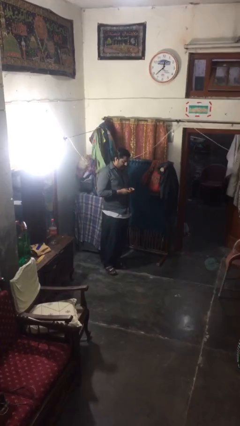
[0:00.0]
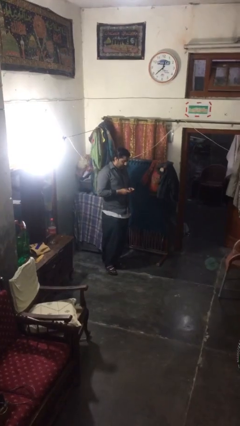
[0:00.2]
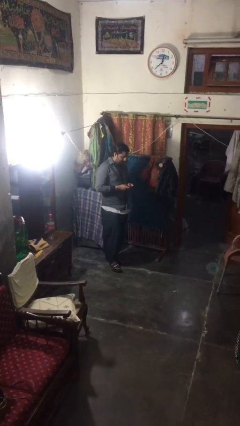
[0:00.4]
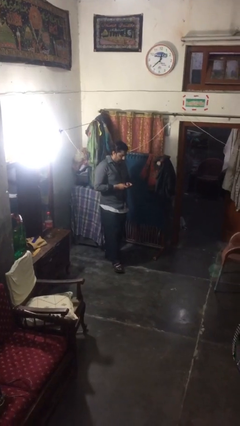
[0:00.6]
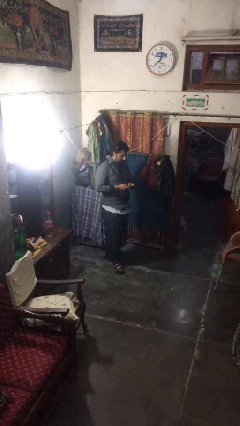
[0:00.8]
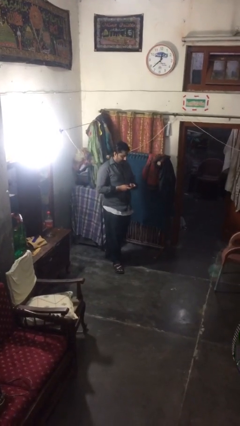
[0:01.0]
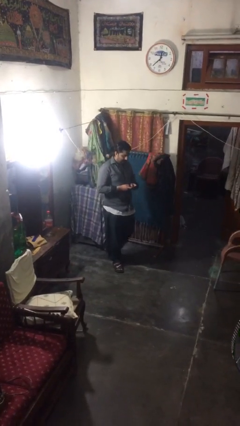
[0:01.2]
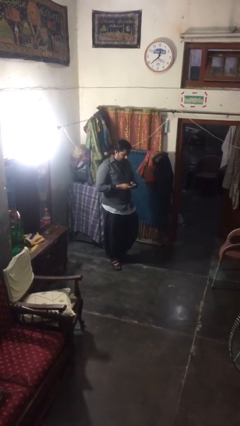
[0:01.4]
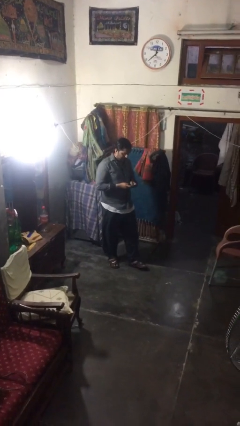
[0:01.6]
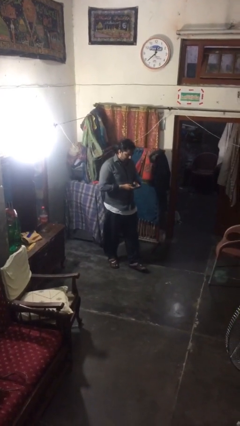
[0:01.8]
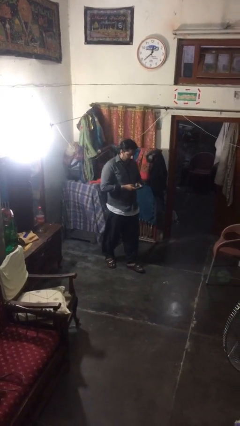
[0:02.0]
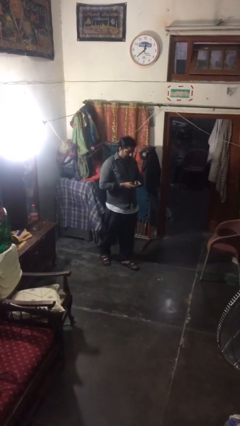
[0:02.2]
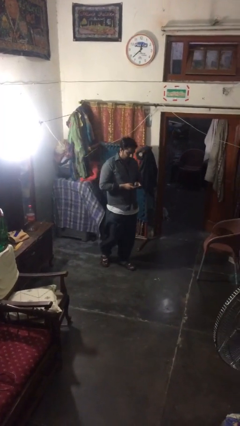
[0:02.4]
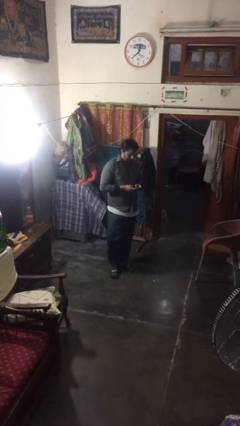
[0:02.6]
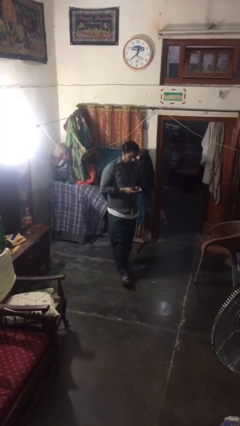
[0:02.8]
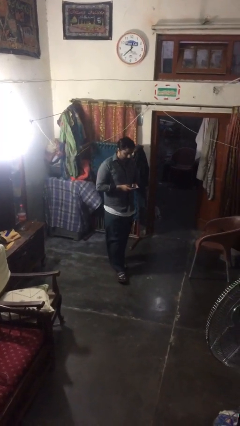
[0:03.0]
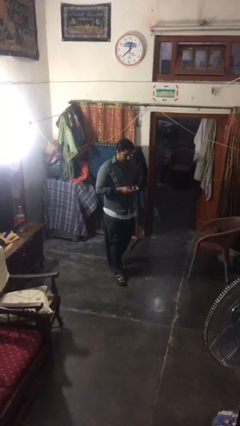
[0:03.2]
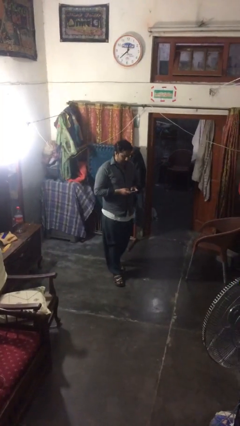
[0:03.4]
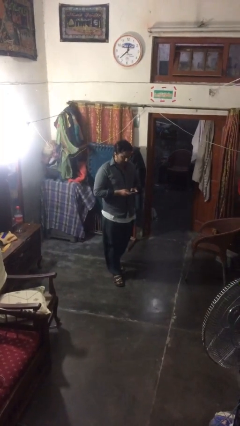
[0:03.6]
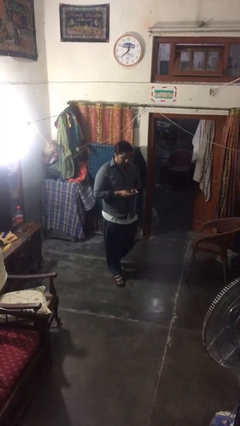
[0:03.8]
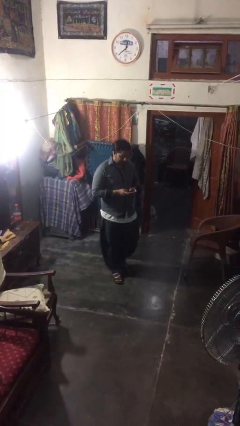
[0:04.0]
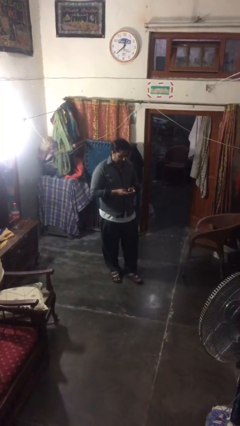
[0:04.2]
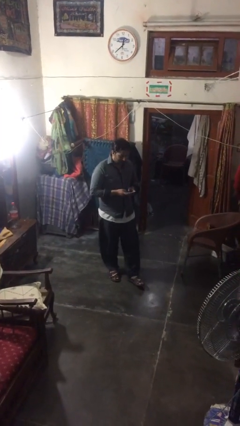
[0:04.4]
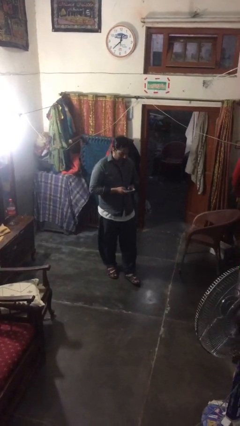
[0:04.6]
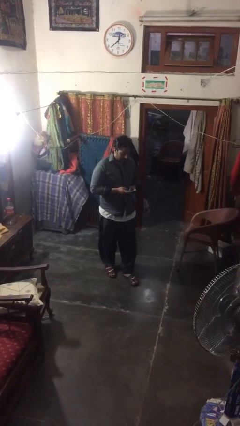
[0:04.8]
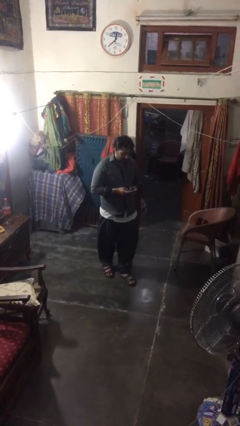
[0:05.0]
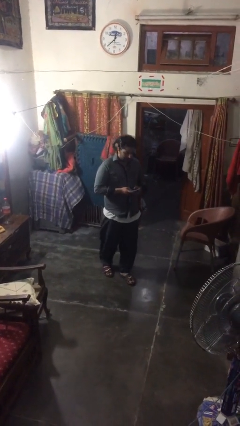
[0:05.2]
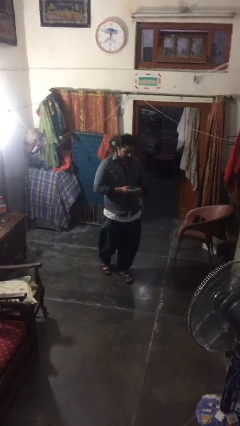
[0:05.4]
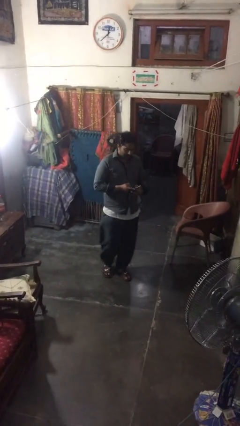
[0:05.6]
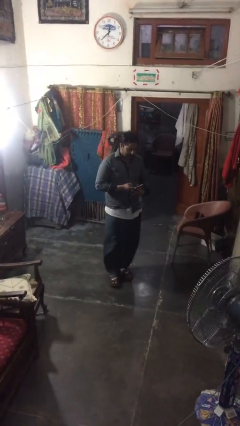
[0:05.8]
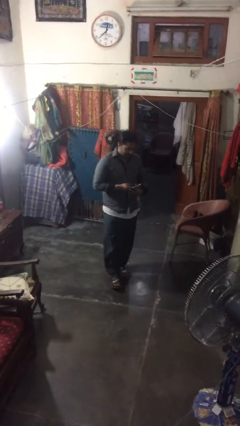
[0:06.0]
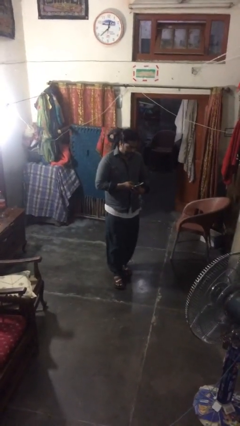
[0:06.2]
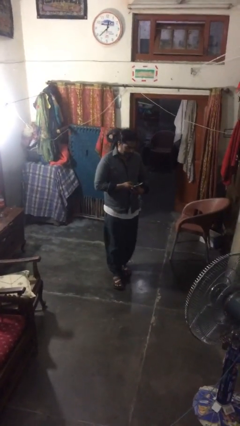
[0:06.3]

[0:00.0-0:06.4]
person texts on phone

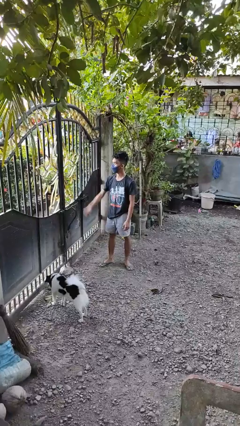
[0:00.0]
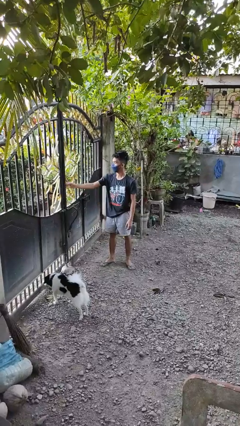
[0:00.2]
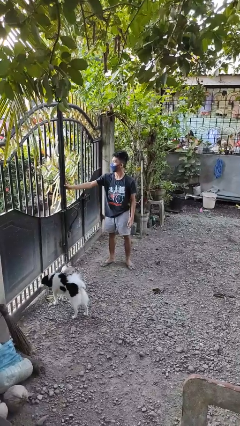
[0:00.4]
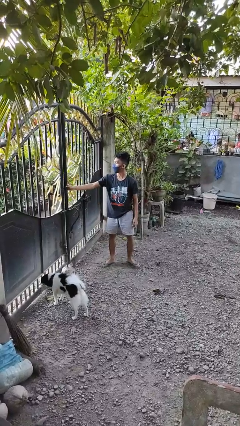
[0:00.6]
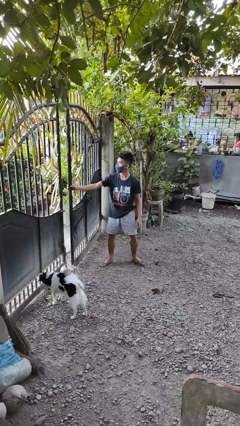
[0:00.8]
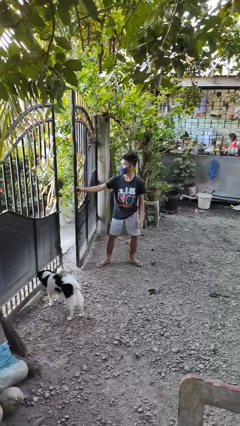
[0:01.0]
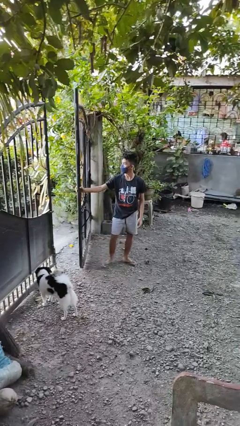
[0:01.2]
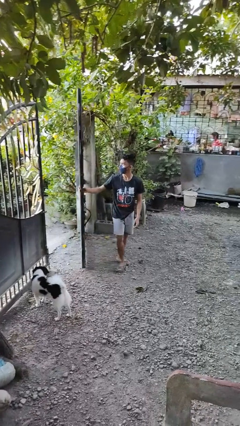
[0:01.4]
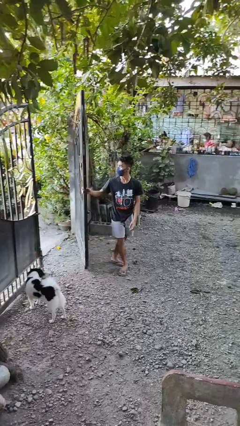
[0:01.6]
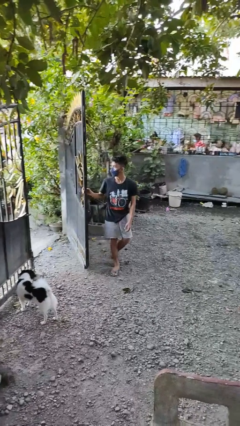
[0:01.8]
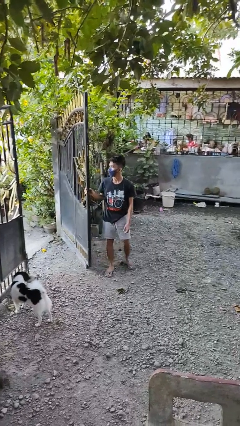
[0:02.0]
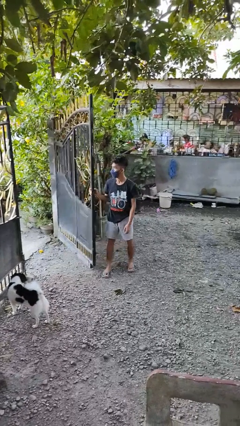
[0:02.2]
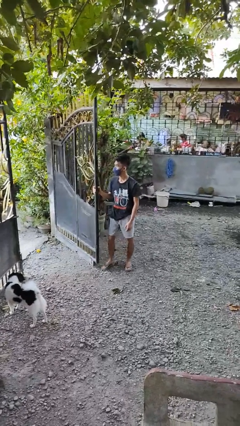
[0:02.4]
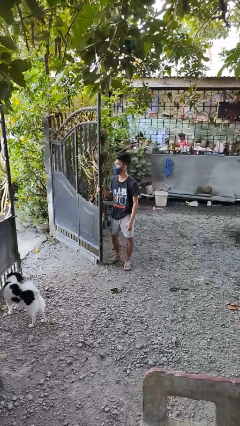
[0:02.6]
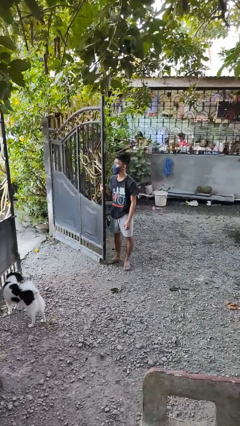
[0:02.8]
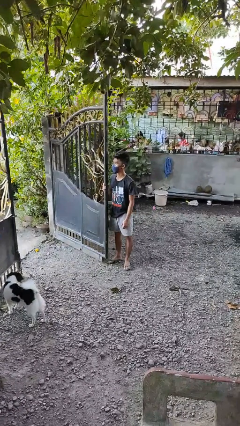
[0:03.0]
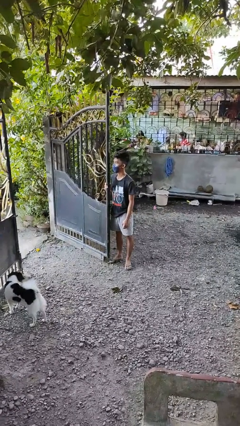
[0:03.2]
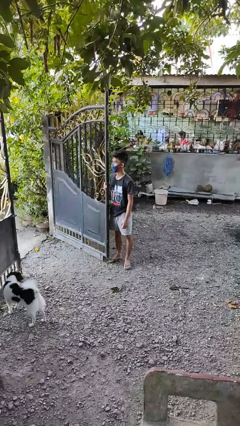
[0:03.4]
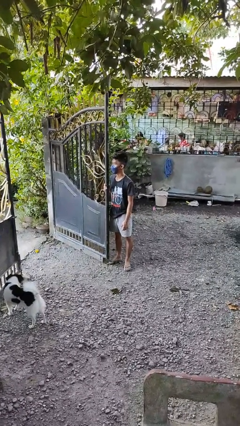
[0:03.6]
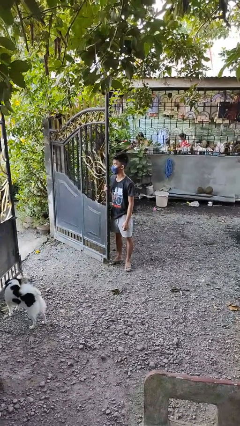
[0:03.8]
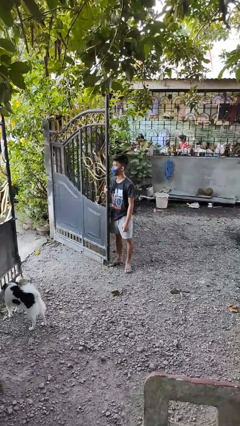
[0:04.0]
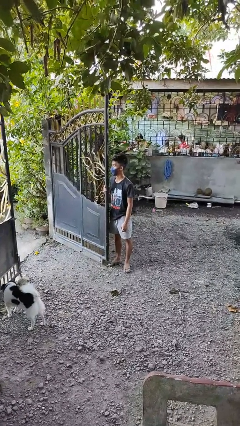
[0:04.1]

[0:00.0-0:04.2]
person opens gate

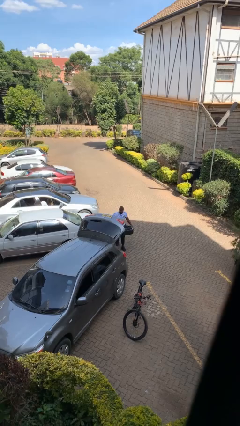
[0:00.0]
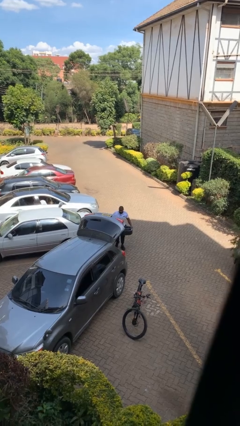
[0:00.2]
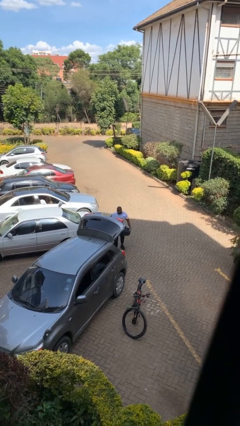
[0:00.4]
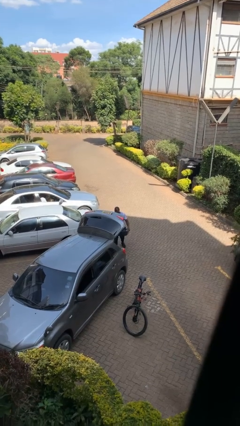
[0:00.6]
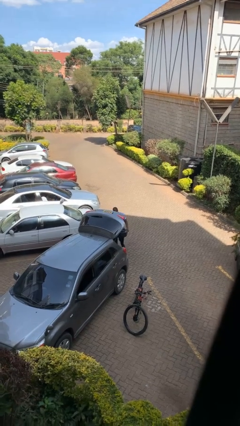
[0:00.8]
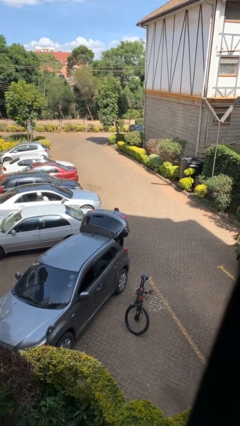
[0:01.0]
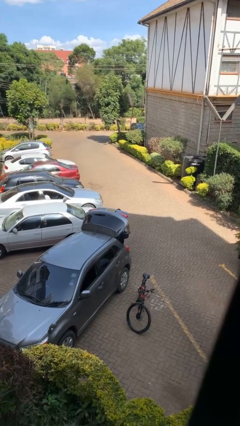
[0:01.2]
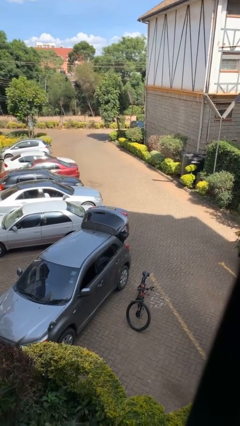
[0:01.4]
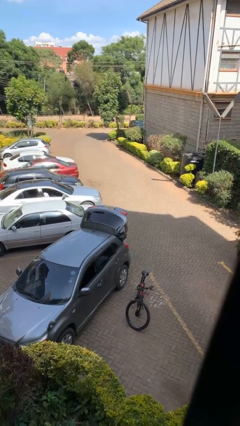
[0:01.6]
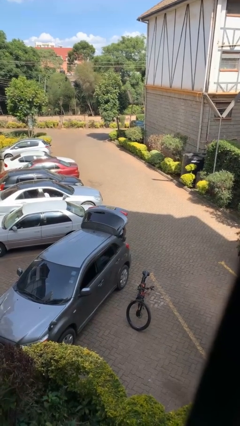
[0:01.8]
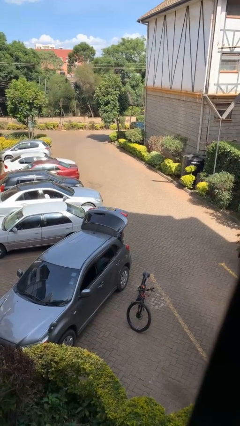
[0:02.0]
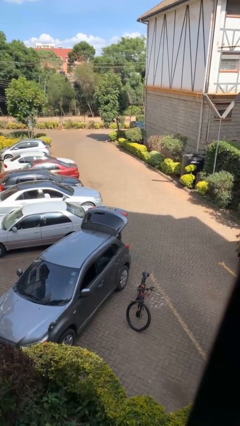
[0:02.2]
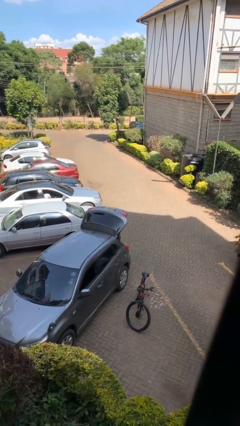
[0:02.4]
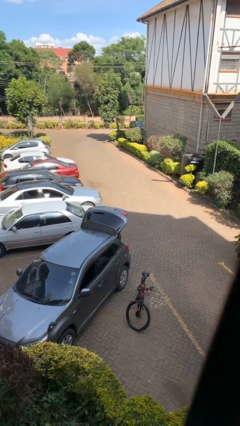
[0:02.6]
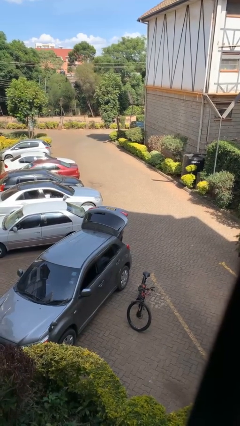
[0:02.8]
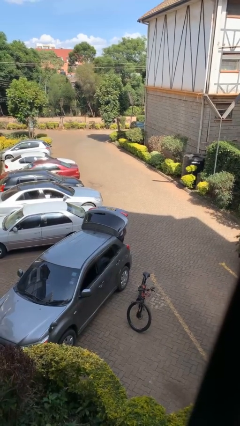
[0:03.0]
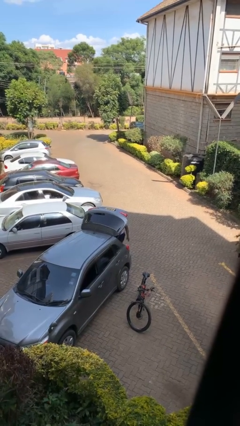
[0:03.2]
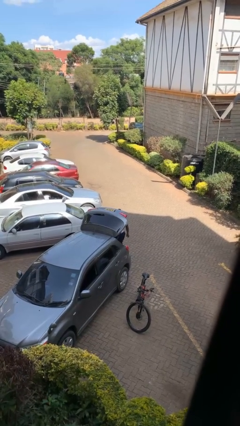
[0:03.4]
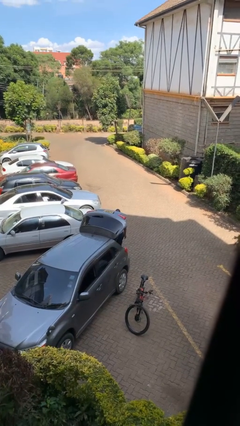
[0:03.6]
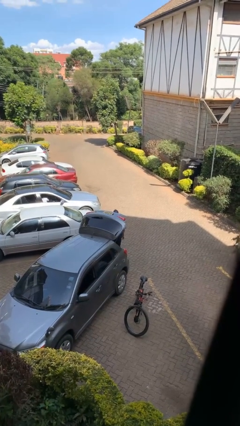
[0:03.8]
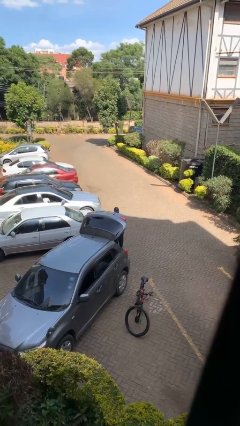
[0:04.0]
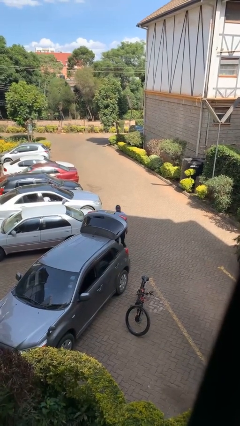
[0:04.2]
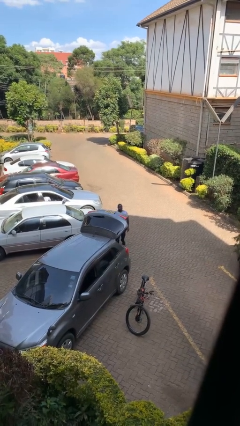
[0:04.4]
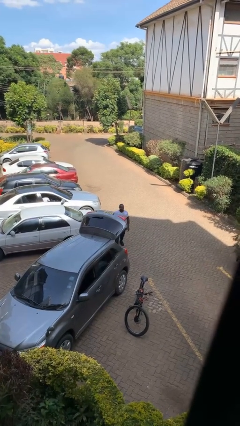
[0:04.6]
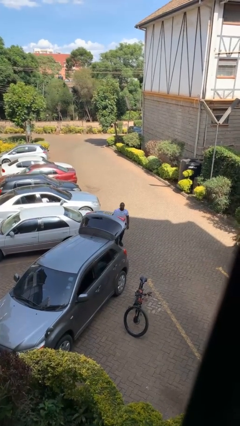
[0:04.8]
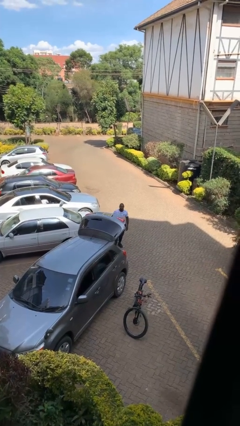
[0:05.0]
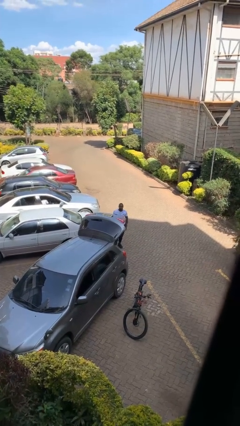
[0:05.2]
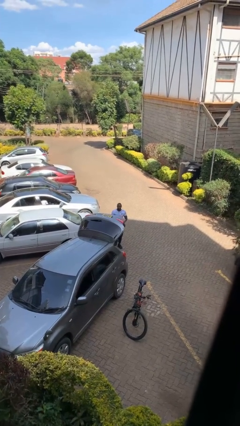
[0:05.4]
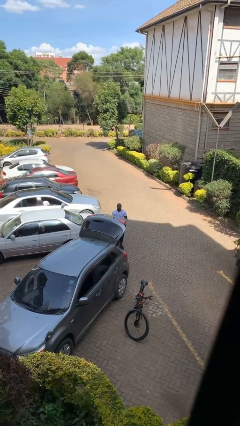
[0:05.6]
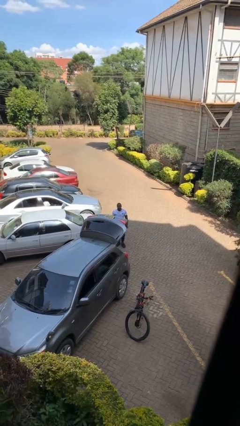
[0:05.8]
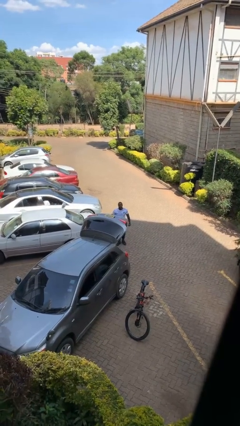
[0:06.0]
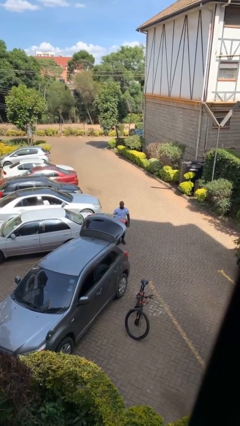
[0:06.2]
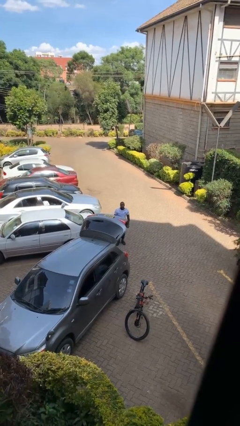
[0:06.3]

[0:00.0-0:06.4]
person loads car

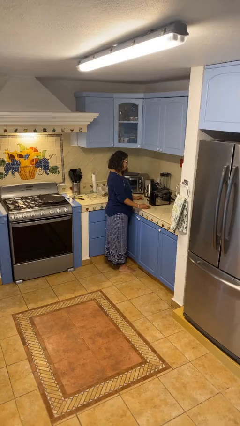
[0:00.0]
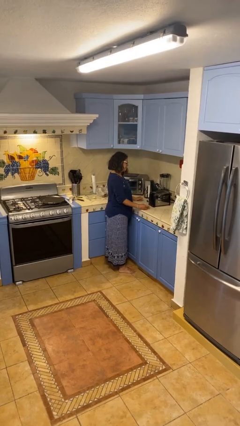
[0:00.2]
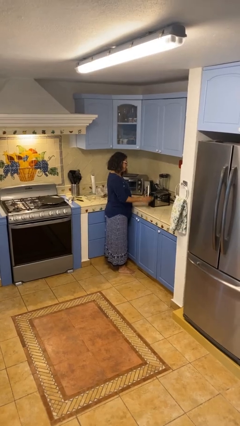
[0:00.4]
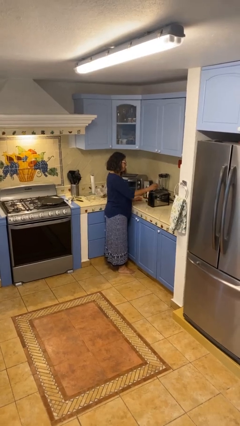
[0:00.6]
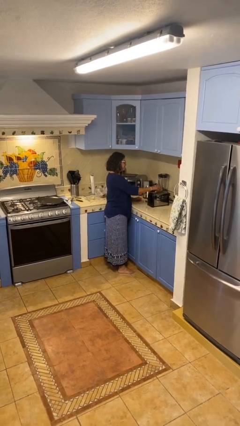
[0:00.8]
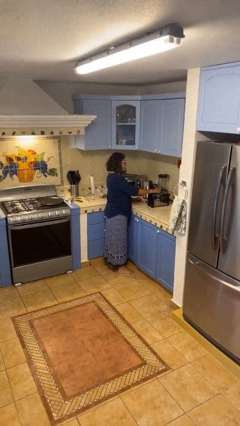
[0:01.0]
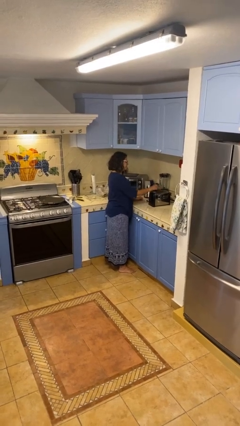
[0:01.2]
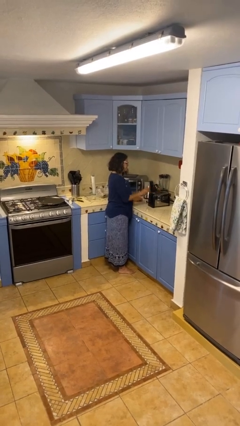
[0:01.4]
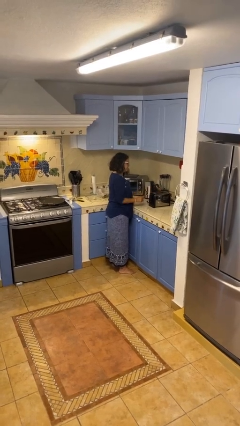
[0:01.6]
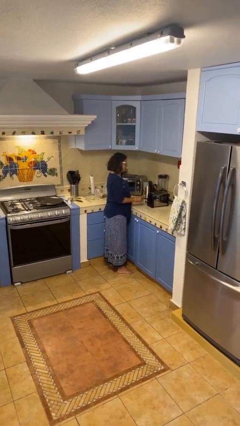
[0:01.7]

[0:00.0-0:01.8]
person puts object into toaster
